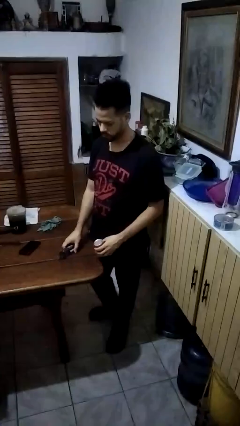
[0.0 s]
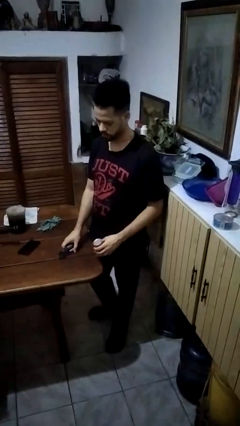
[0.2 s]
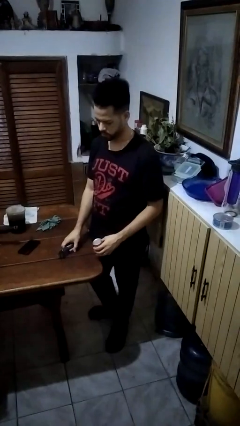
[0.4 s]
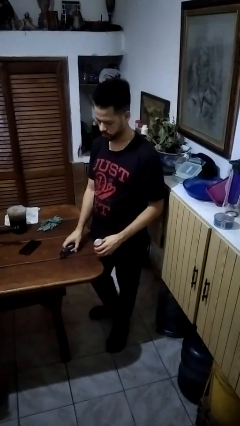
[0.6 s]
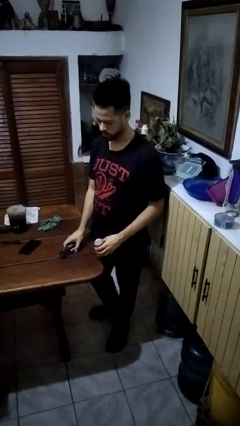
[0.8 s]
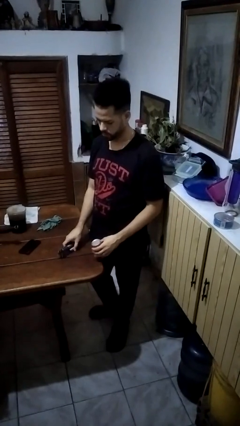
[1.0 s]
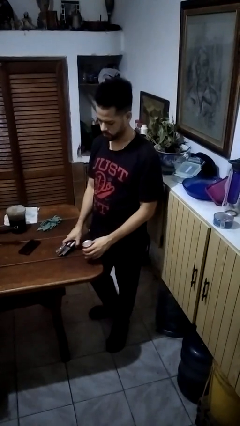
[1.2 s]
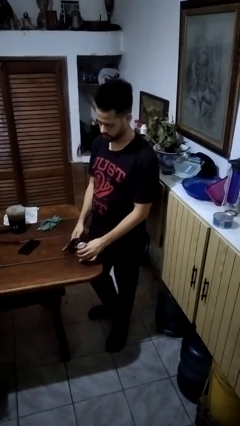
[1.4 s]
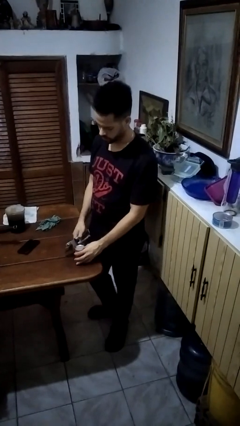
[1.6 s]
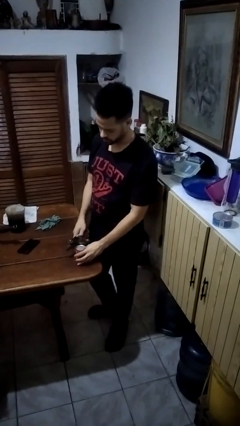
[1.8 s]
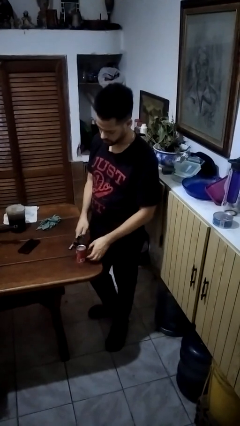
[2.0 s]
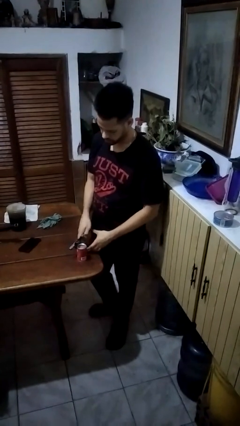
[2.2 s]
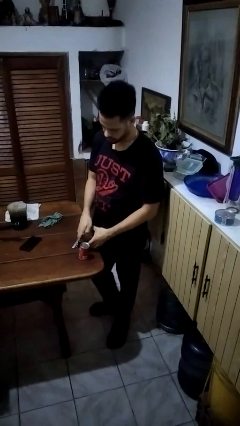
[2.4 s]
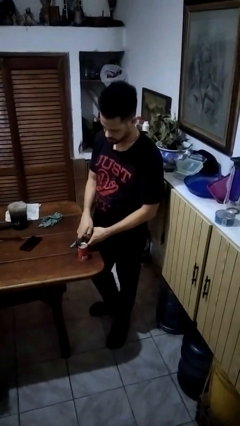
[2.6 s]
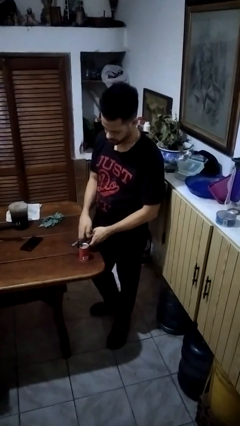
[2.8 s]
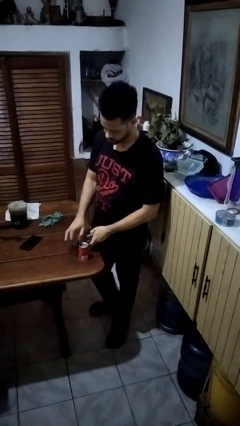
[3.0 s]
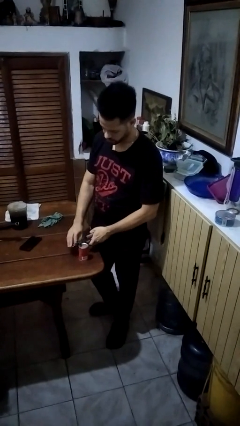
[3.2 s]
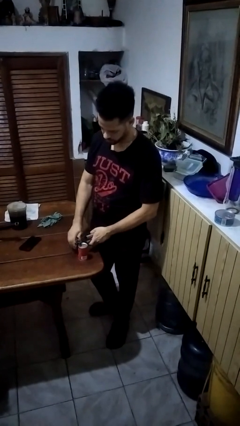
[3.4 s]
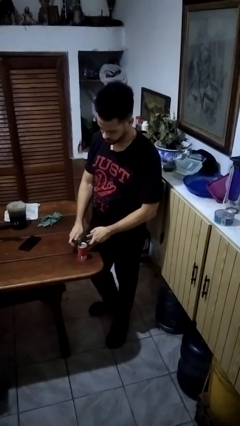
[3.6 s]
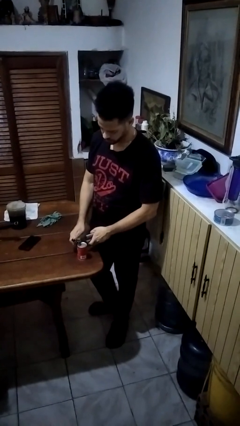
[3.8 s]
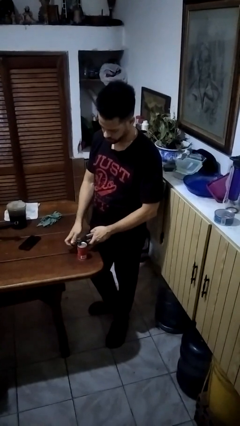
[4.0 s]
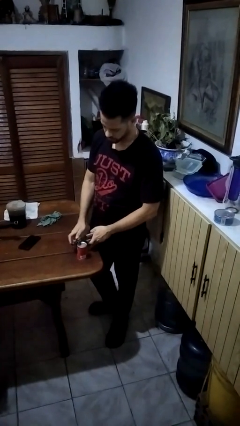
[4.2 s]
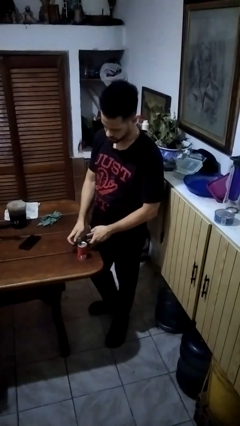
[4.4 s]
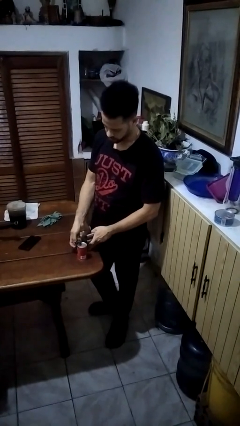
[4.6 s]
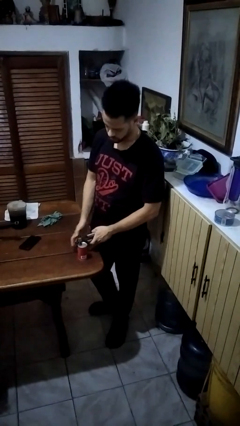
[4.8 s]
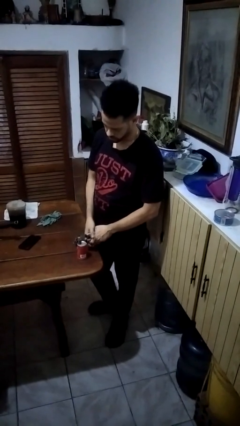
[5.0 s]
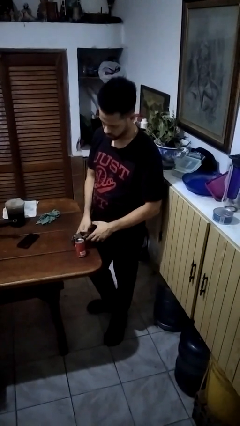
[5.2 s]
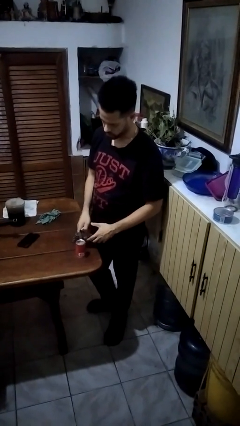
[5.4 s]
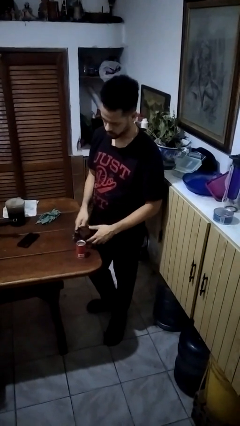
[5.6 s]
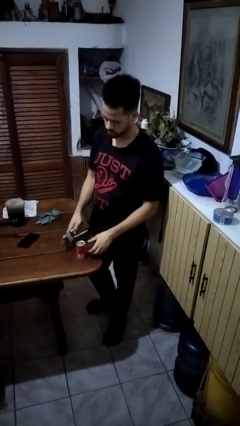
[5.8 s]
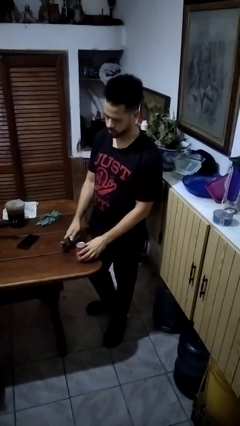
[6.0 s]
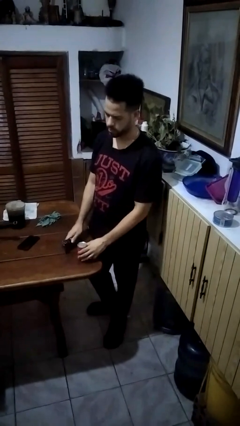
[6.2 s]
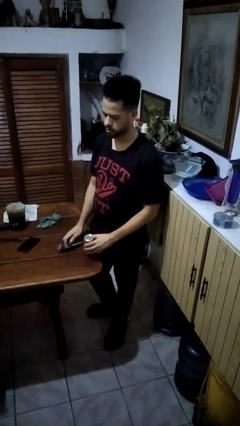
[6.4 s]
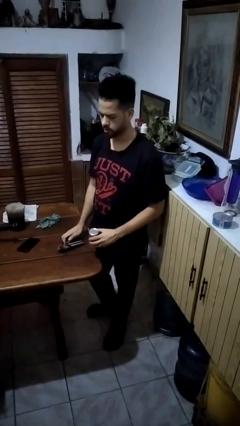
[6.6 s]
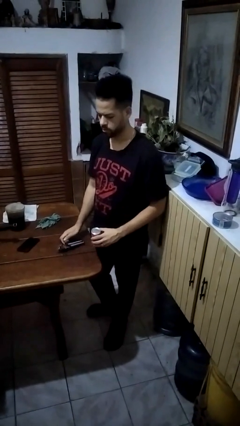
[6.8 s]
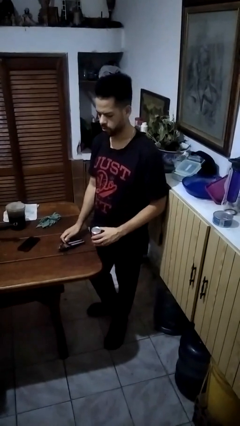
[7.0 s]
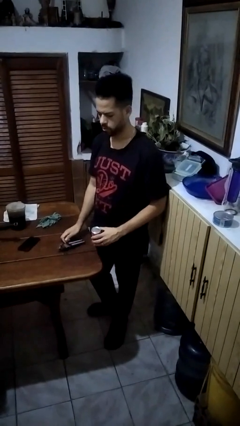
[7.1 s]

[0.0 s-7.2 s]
person opens can with can opener

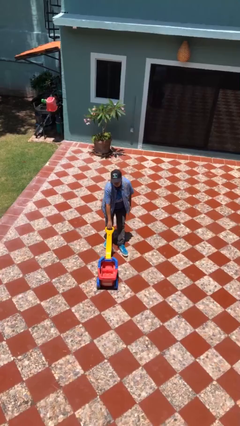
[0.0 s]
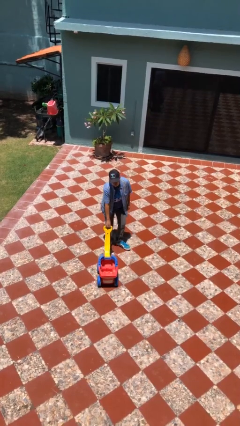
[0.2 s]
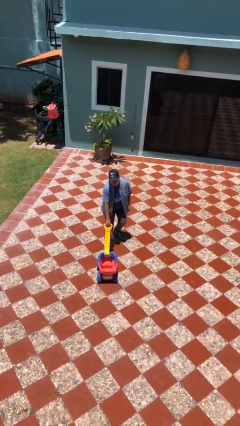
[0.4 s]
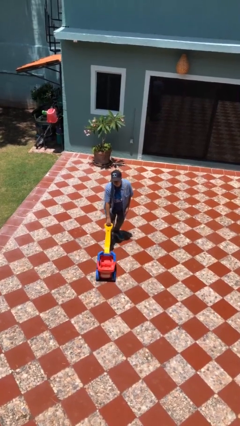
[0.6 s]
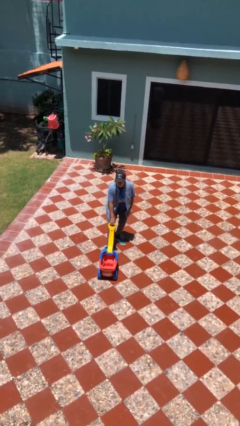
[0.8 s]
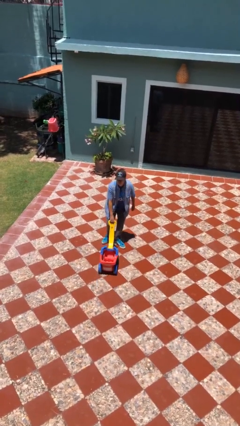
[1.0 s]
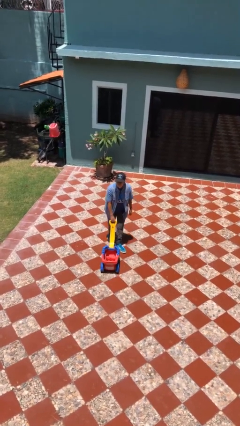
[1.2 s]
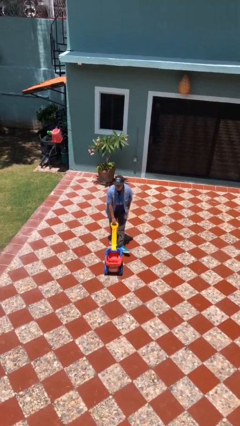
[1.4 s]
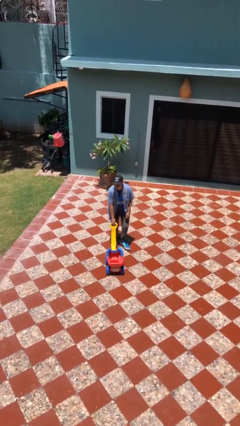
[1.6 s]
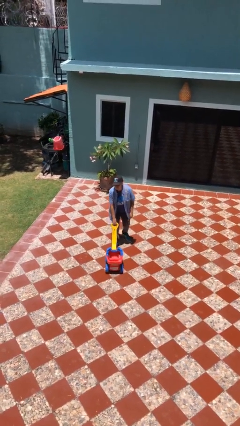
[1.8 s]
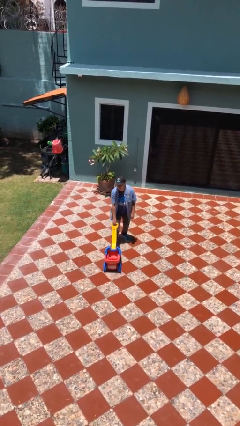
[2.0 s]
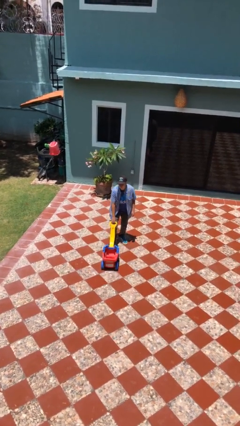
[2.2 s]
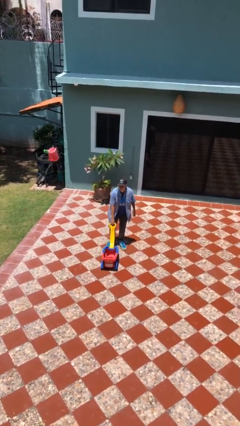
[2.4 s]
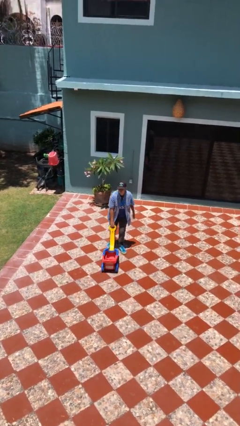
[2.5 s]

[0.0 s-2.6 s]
person pulls wheeled cart

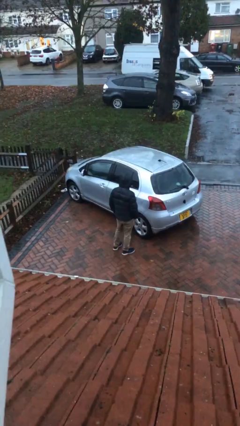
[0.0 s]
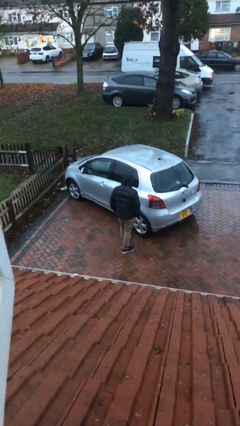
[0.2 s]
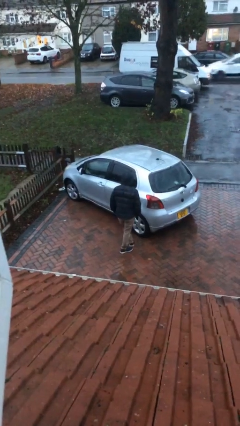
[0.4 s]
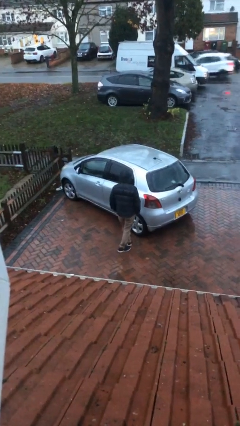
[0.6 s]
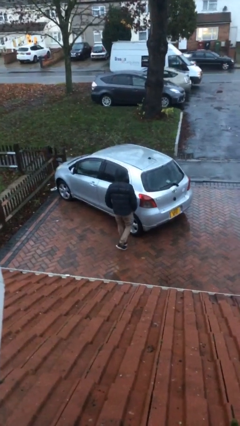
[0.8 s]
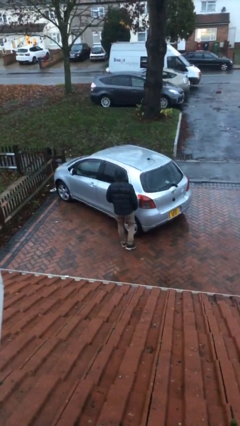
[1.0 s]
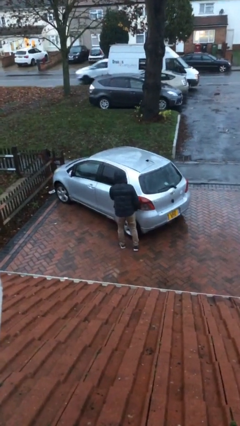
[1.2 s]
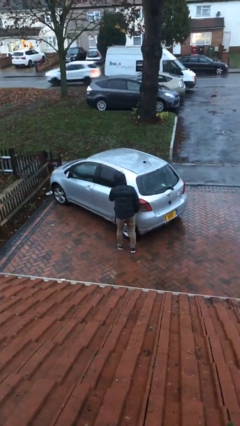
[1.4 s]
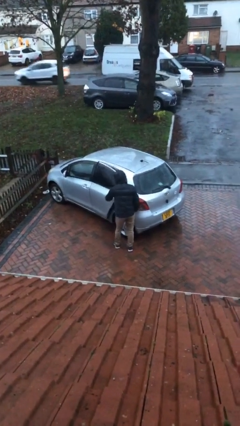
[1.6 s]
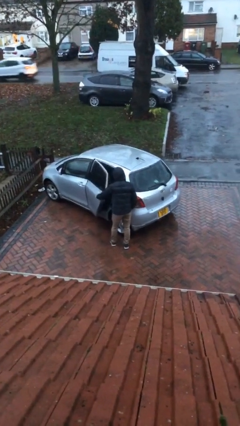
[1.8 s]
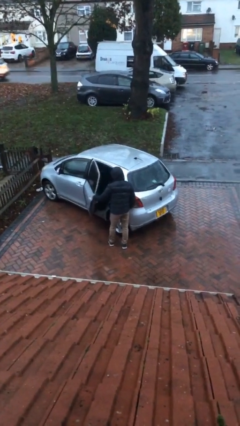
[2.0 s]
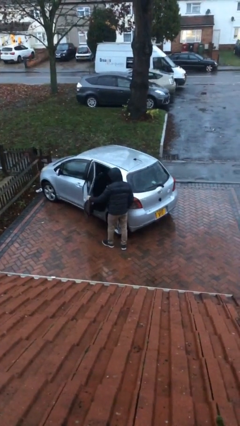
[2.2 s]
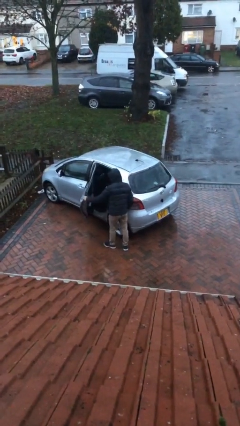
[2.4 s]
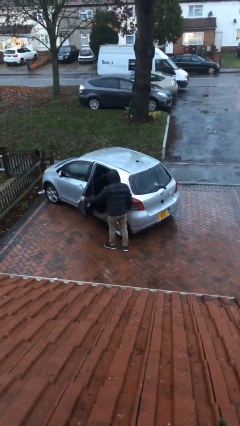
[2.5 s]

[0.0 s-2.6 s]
person opens car door

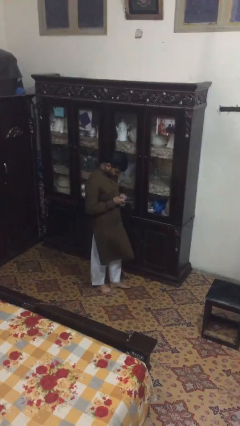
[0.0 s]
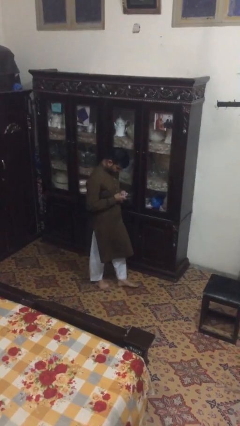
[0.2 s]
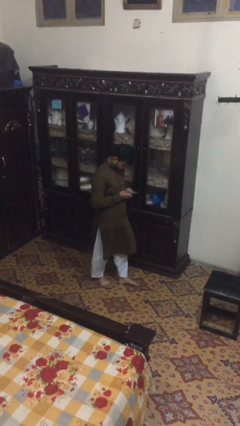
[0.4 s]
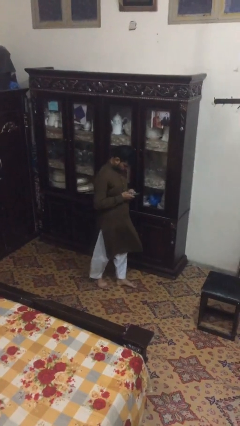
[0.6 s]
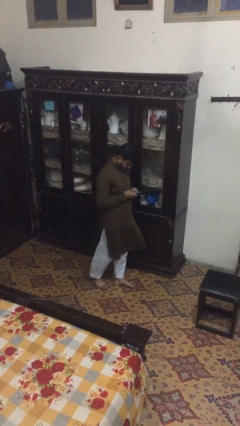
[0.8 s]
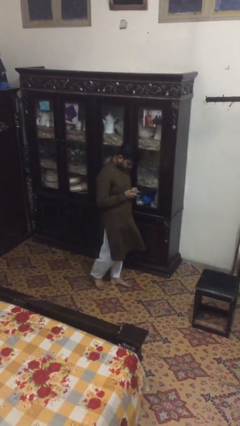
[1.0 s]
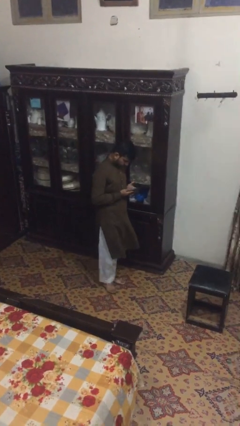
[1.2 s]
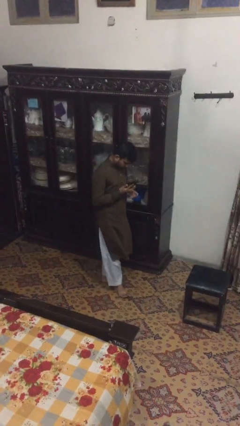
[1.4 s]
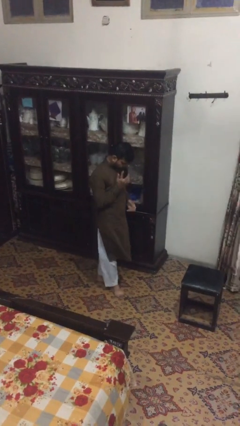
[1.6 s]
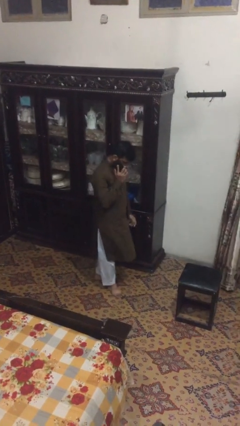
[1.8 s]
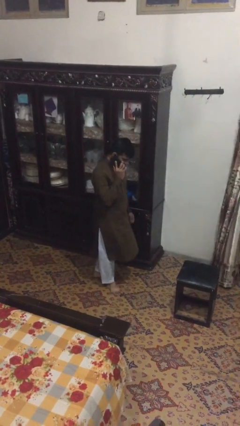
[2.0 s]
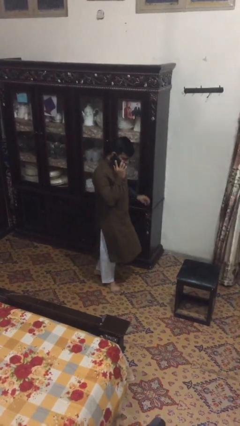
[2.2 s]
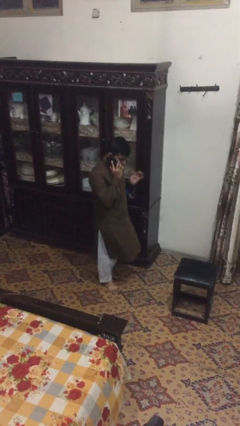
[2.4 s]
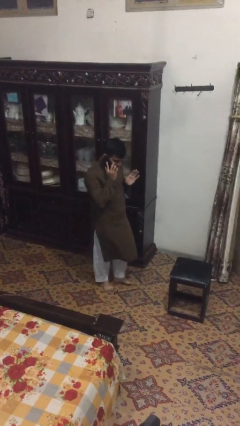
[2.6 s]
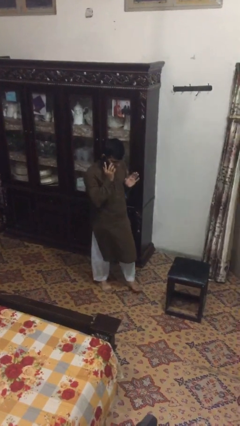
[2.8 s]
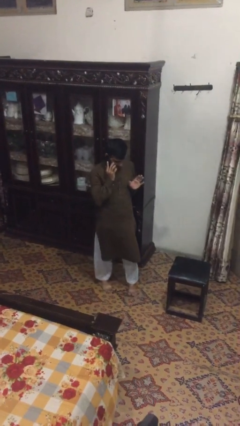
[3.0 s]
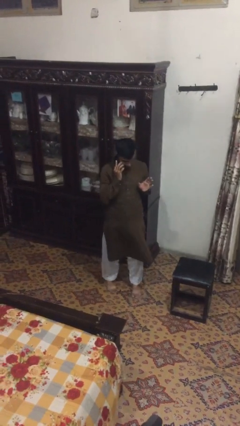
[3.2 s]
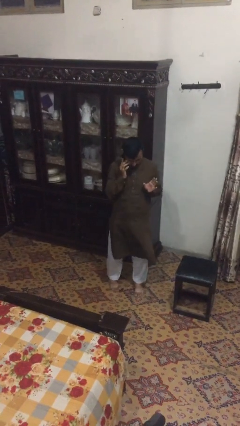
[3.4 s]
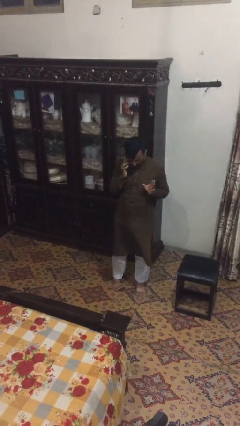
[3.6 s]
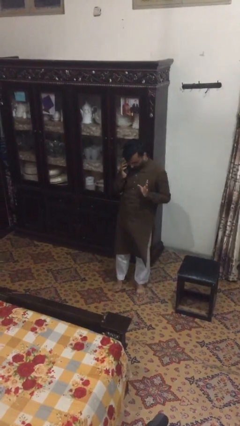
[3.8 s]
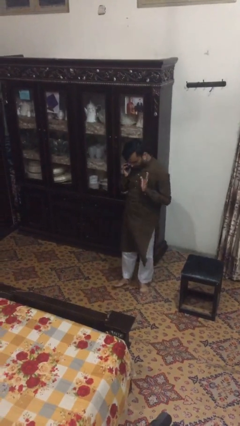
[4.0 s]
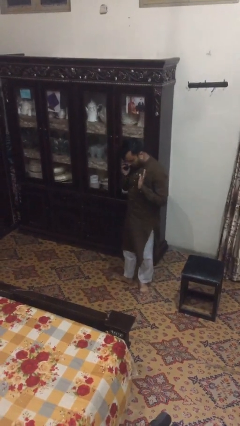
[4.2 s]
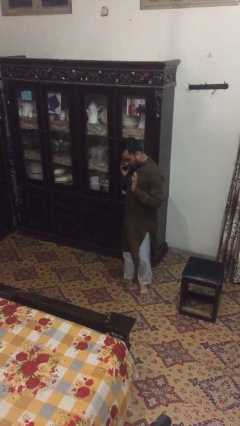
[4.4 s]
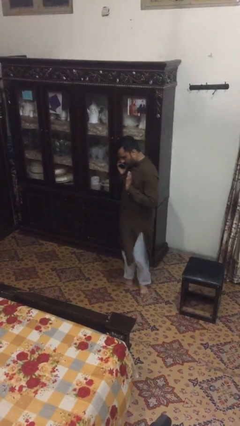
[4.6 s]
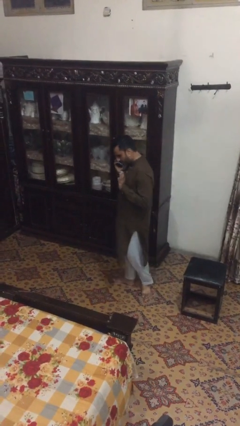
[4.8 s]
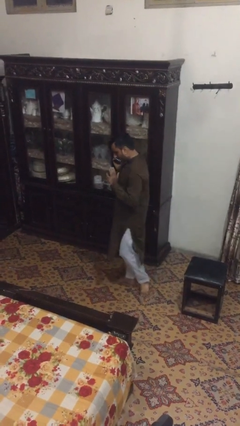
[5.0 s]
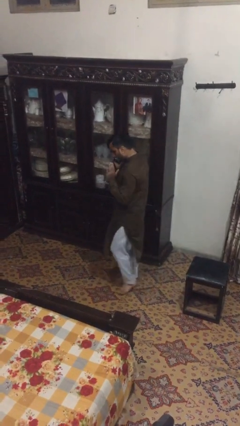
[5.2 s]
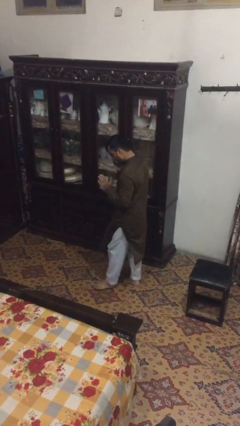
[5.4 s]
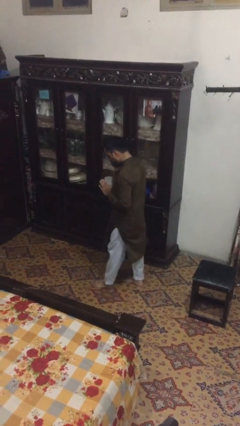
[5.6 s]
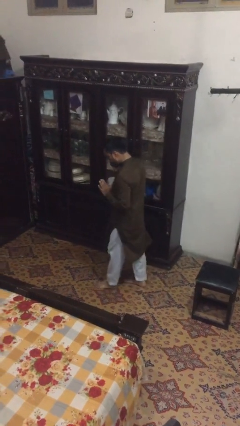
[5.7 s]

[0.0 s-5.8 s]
person talks on phone
